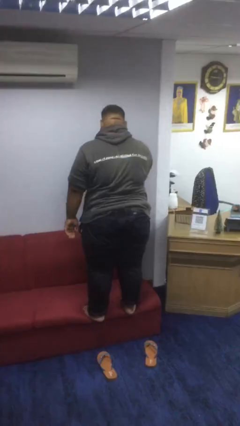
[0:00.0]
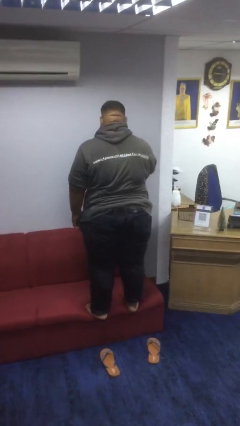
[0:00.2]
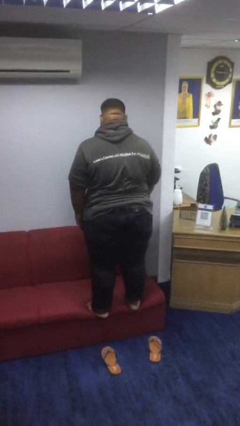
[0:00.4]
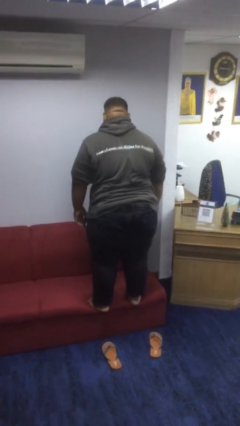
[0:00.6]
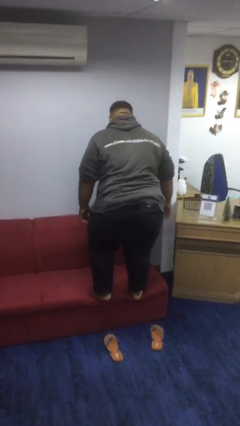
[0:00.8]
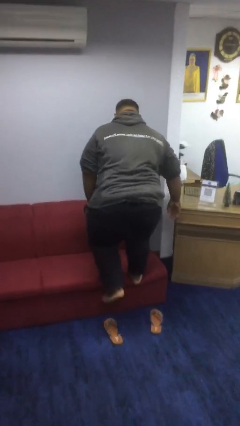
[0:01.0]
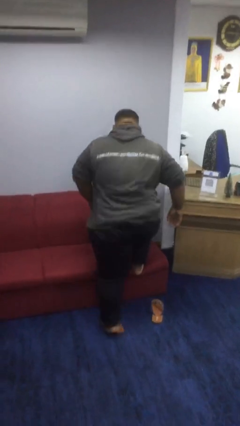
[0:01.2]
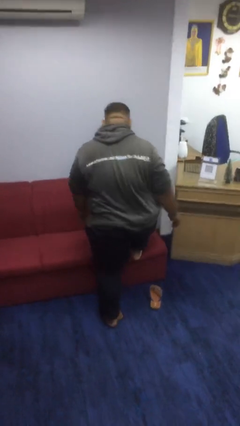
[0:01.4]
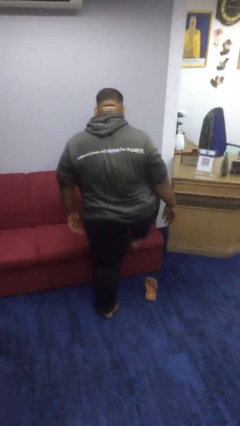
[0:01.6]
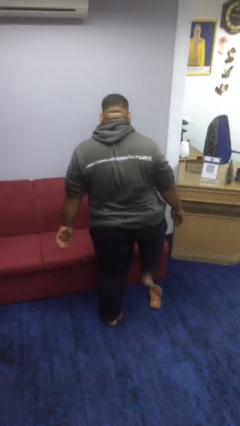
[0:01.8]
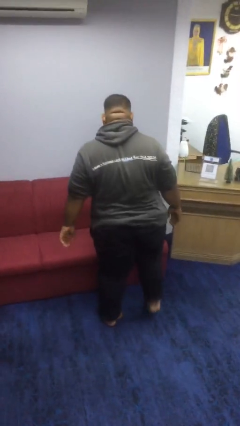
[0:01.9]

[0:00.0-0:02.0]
person climbs off couch

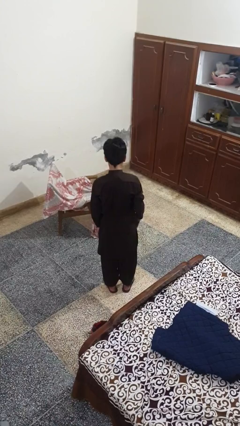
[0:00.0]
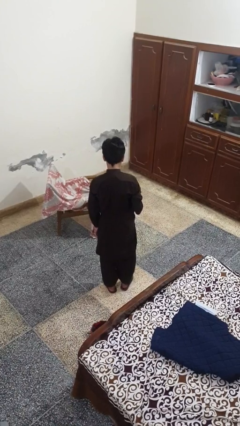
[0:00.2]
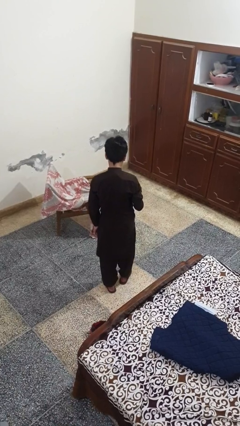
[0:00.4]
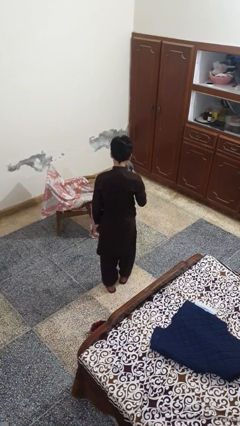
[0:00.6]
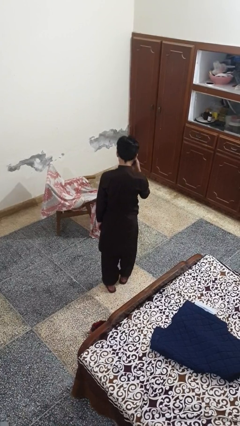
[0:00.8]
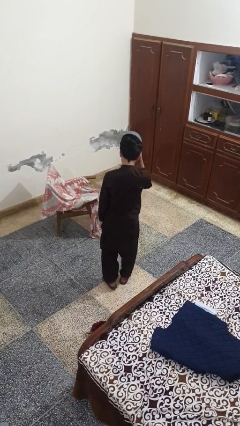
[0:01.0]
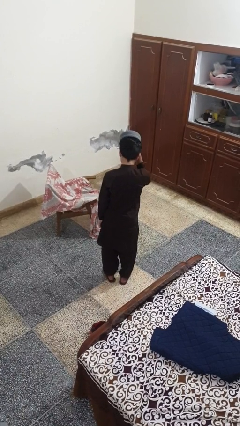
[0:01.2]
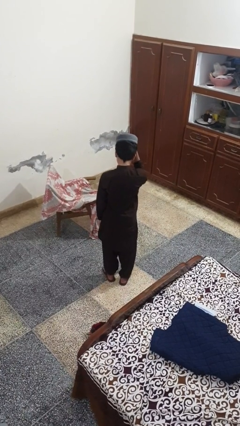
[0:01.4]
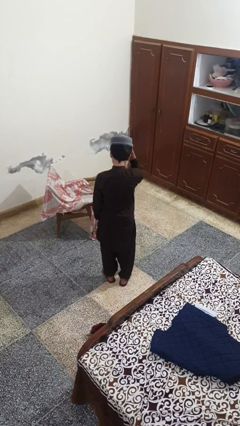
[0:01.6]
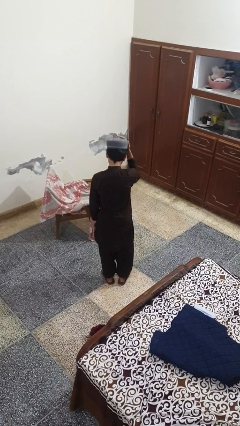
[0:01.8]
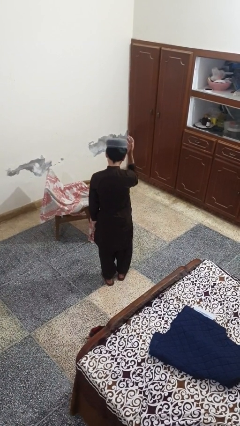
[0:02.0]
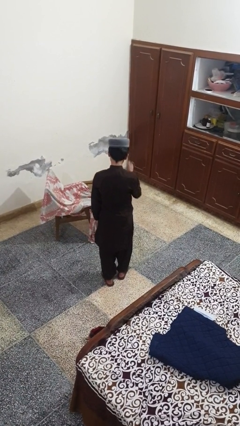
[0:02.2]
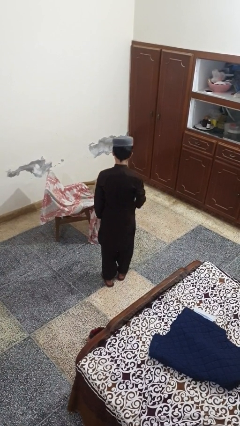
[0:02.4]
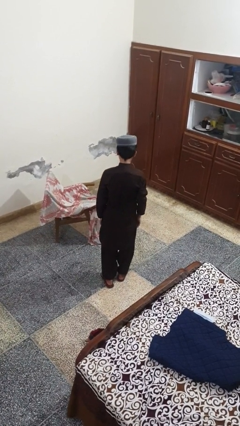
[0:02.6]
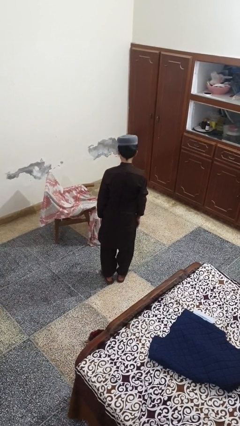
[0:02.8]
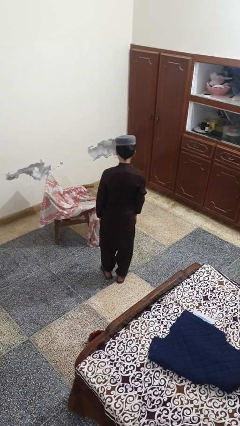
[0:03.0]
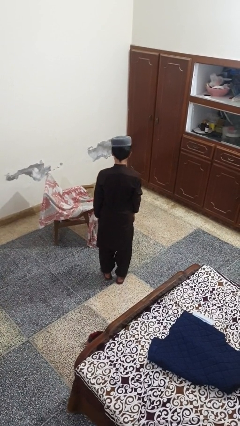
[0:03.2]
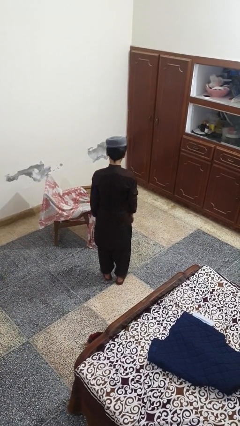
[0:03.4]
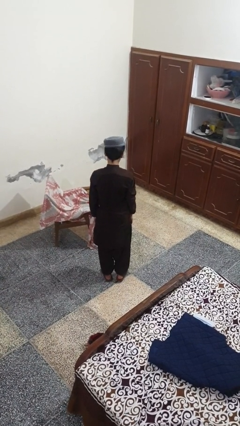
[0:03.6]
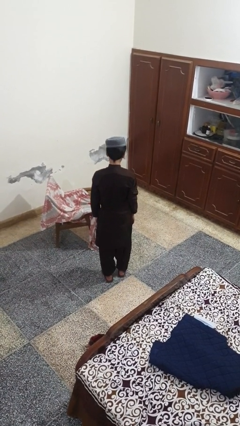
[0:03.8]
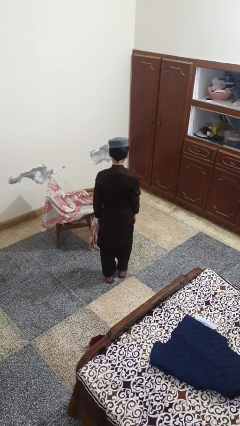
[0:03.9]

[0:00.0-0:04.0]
person puts on hat

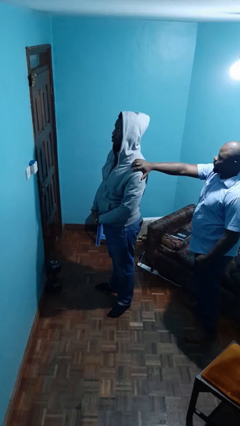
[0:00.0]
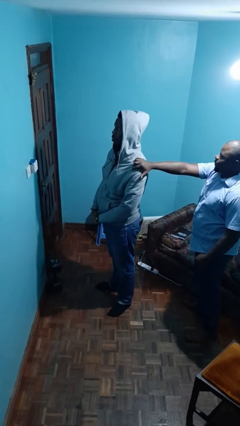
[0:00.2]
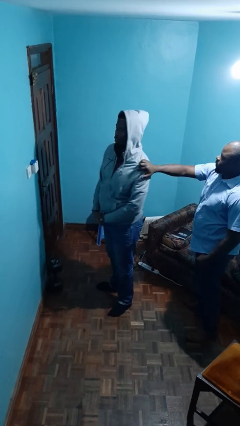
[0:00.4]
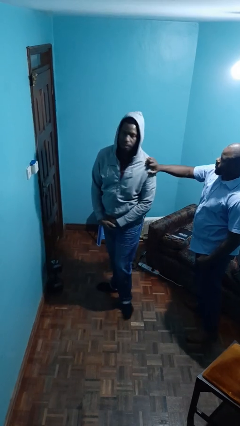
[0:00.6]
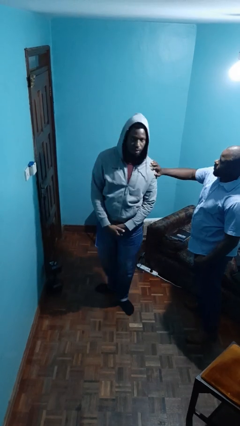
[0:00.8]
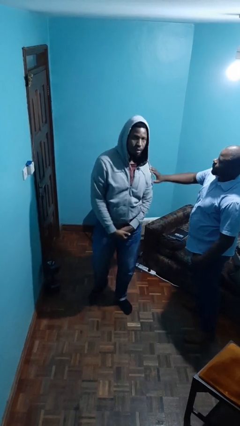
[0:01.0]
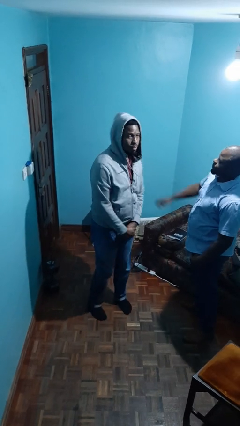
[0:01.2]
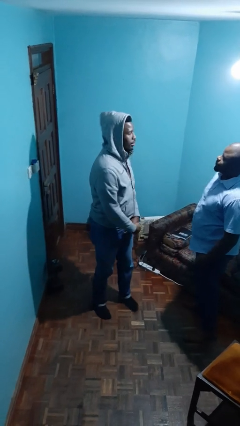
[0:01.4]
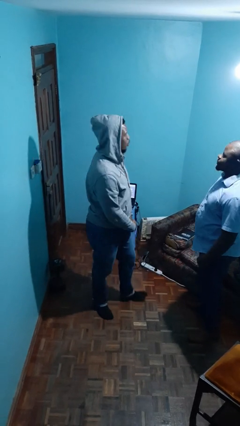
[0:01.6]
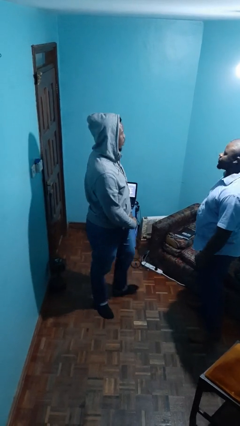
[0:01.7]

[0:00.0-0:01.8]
person spins person around

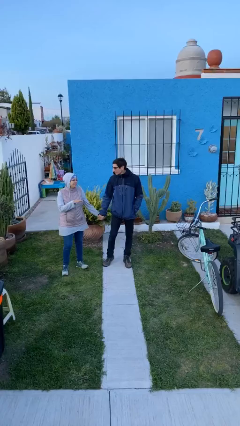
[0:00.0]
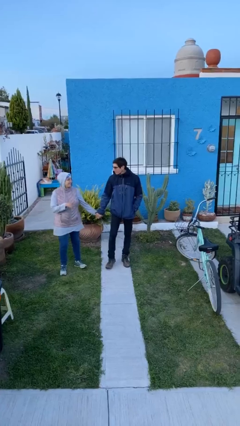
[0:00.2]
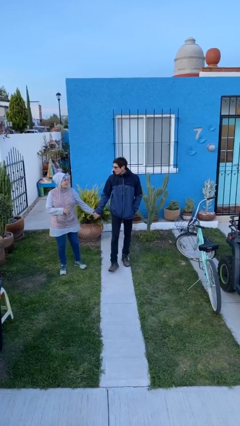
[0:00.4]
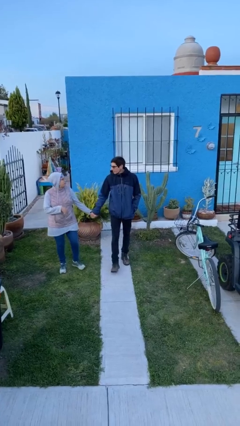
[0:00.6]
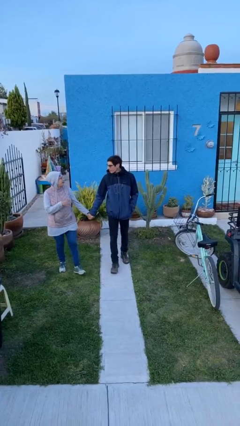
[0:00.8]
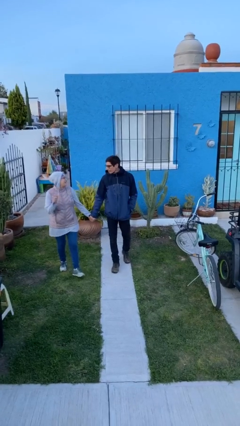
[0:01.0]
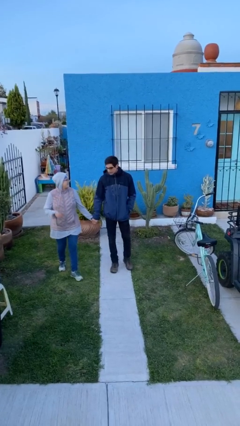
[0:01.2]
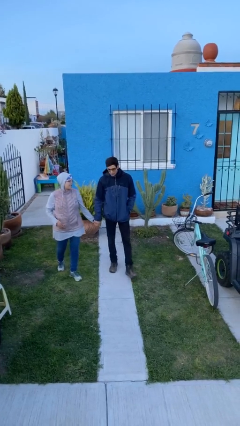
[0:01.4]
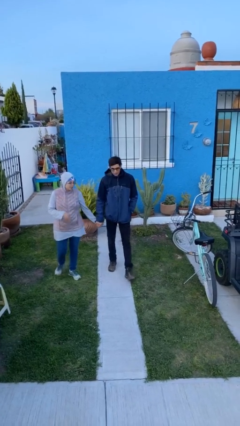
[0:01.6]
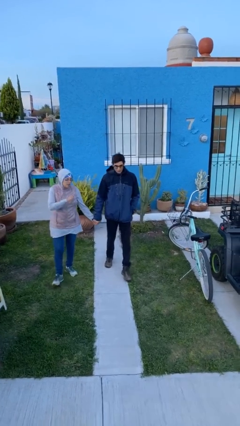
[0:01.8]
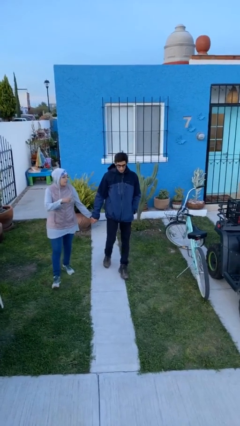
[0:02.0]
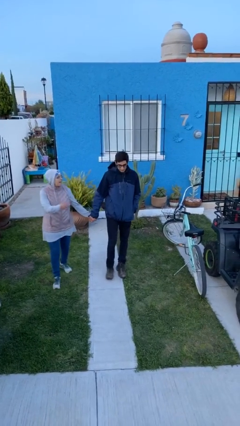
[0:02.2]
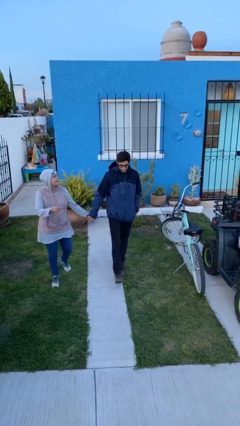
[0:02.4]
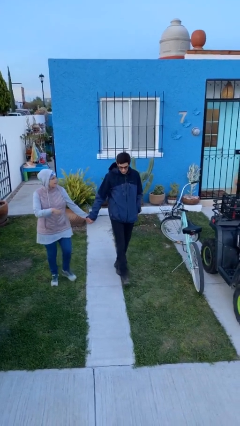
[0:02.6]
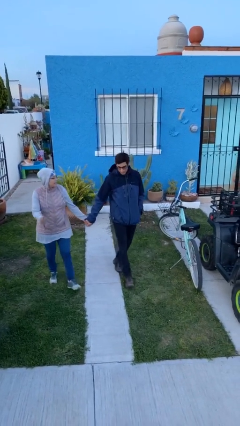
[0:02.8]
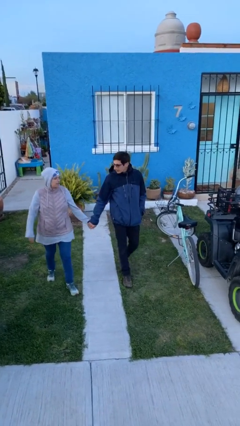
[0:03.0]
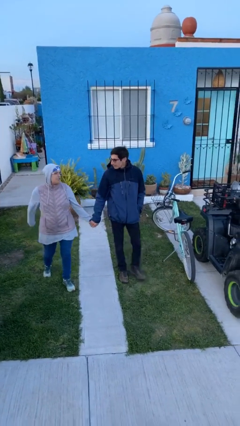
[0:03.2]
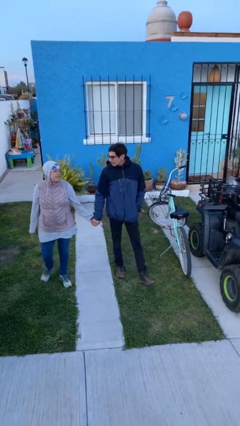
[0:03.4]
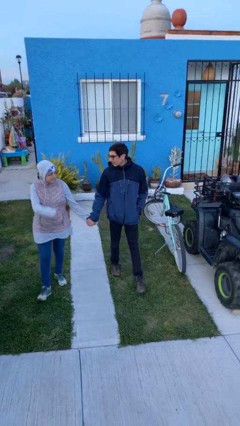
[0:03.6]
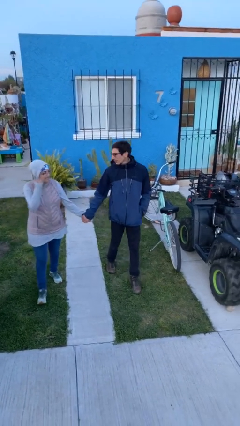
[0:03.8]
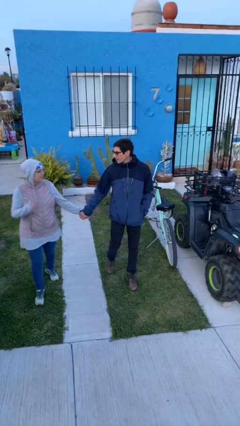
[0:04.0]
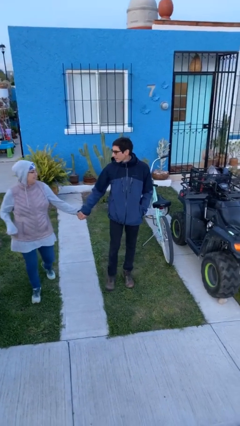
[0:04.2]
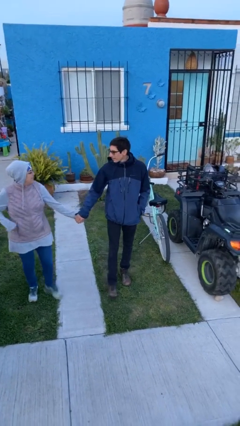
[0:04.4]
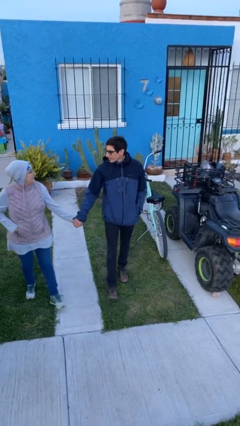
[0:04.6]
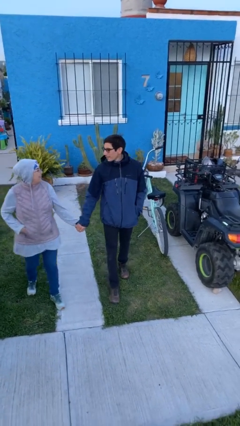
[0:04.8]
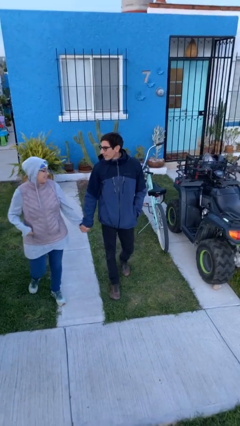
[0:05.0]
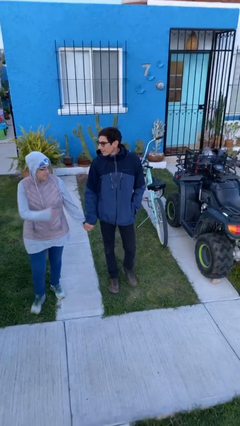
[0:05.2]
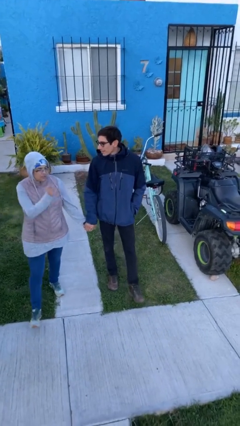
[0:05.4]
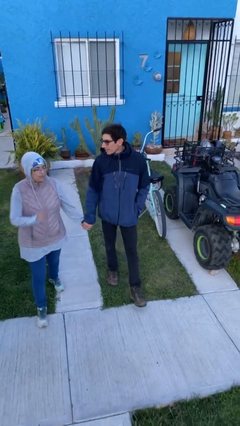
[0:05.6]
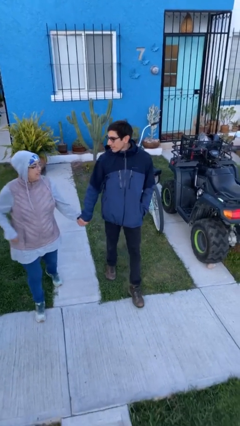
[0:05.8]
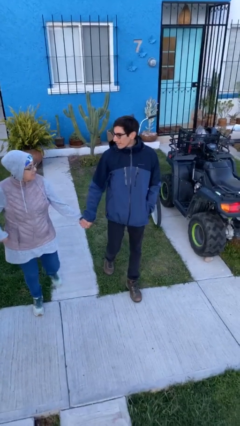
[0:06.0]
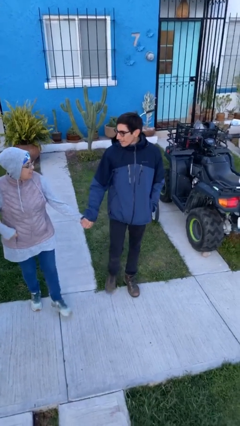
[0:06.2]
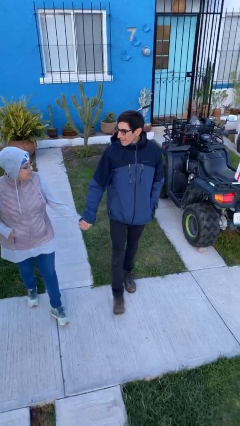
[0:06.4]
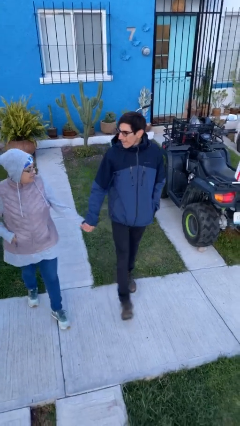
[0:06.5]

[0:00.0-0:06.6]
person holds hand

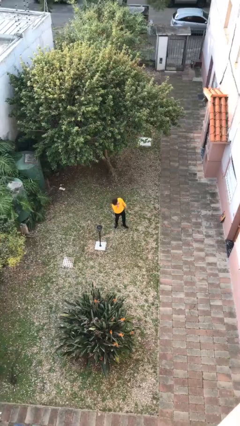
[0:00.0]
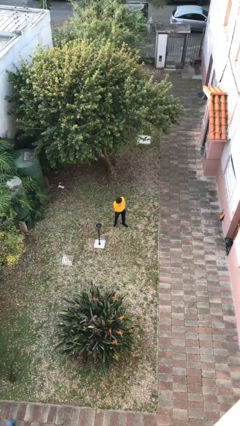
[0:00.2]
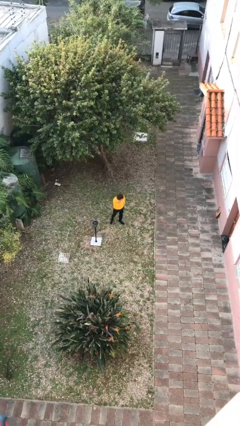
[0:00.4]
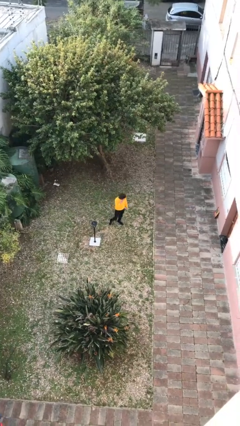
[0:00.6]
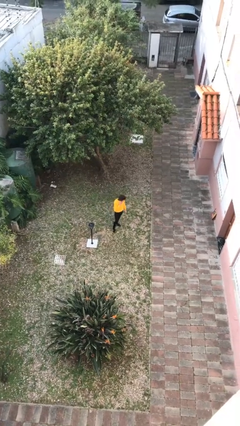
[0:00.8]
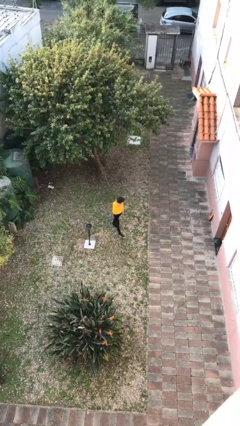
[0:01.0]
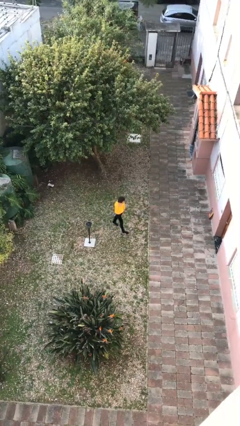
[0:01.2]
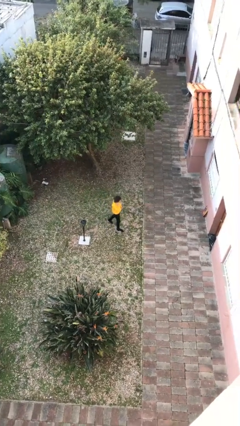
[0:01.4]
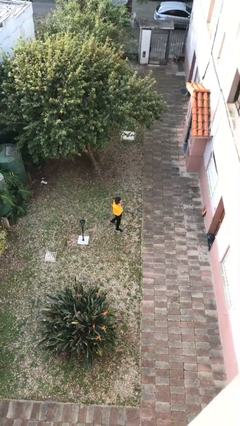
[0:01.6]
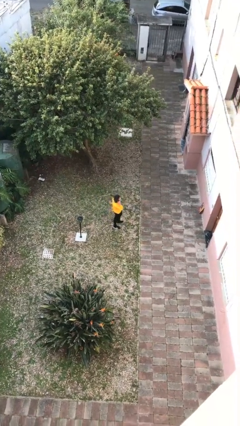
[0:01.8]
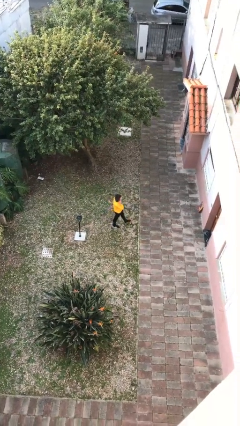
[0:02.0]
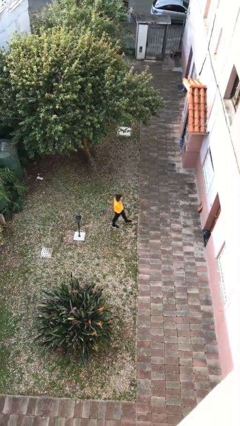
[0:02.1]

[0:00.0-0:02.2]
person talks on phone

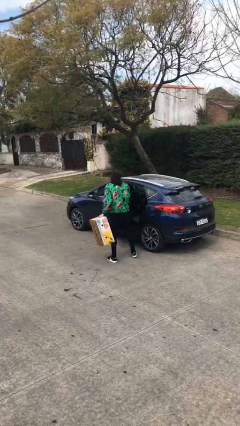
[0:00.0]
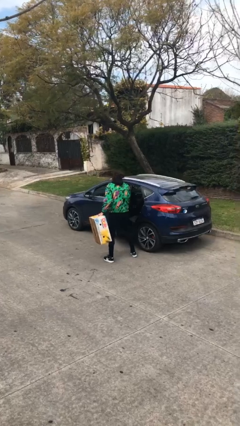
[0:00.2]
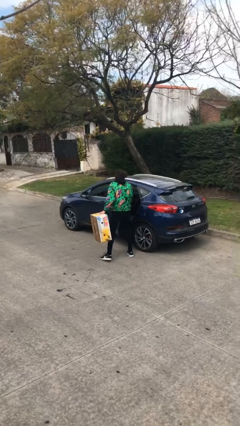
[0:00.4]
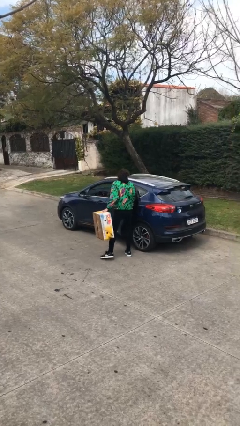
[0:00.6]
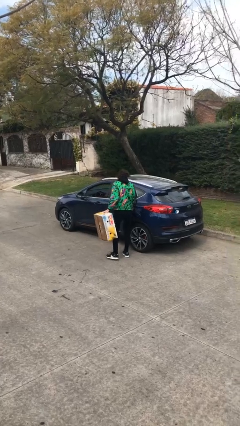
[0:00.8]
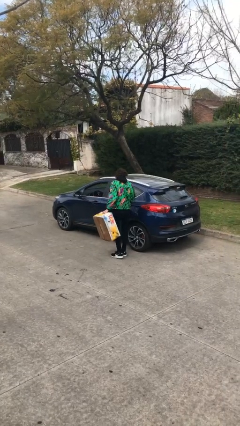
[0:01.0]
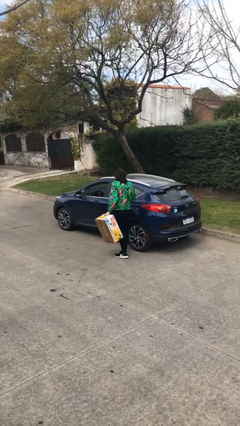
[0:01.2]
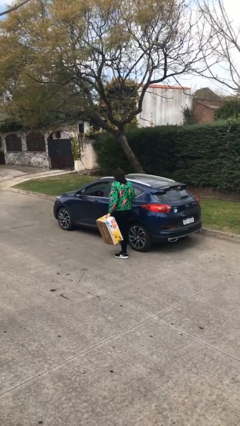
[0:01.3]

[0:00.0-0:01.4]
person closes car door
